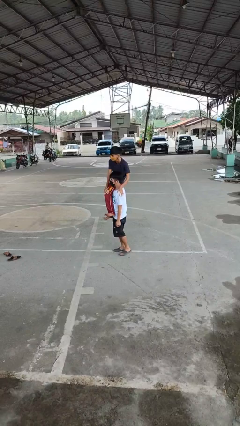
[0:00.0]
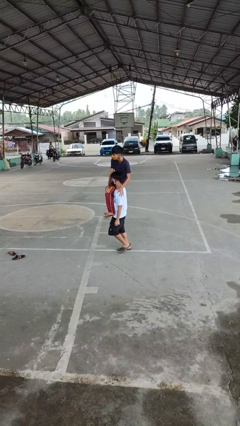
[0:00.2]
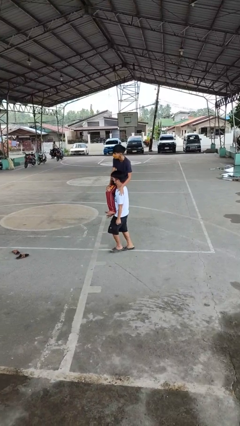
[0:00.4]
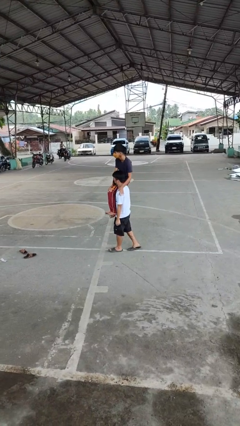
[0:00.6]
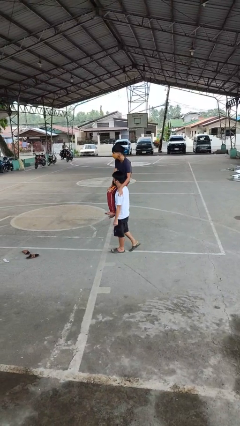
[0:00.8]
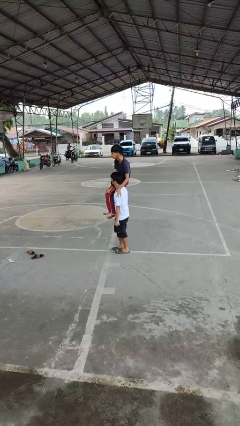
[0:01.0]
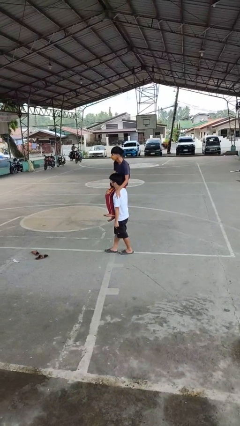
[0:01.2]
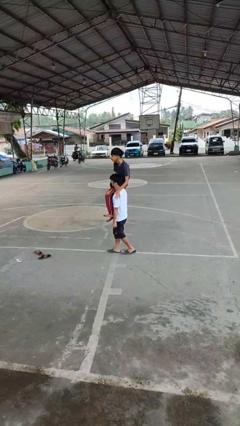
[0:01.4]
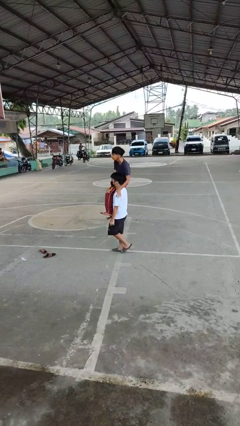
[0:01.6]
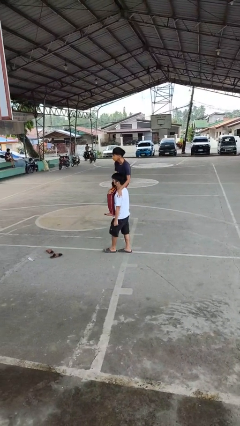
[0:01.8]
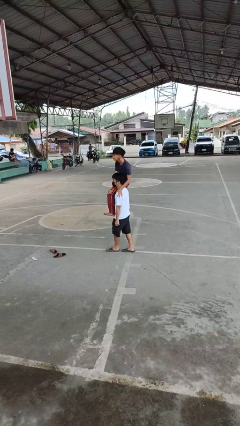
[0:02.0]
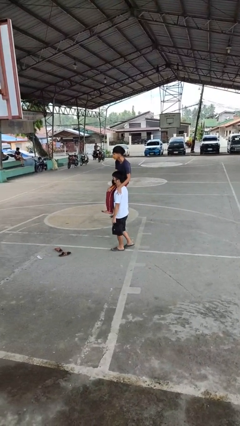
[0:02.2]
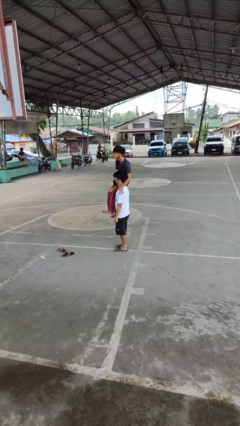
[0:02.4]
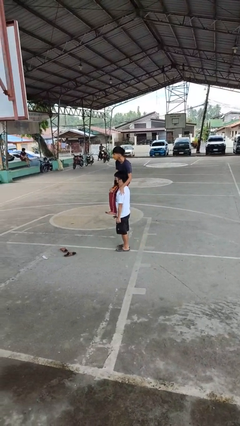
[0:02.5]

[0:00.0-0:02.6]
person carries person on shoulders

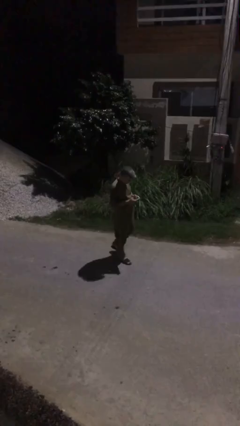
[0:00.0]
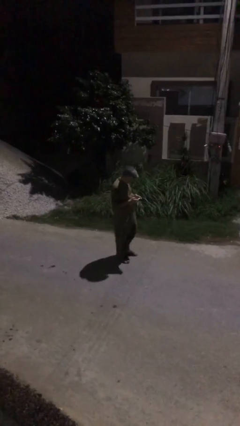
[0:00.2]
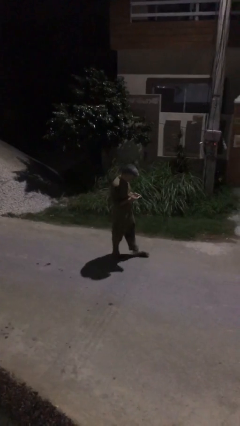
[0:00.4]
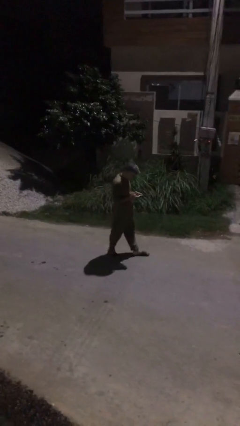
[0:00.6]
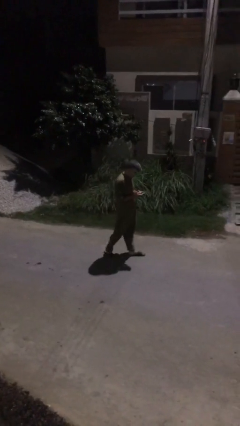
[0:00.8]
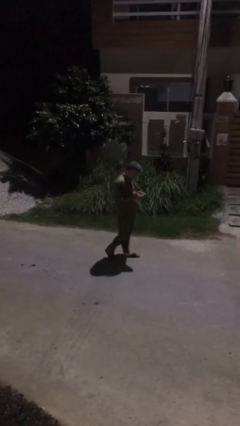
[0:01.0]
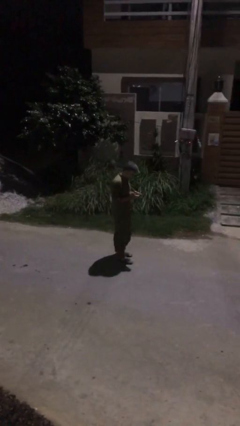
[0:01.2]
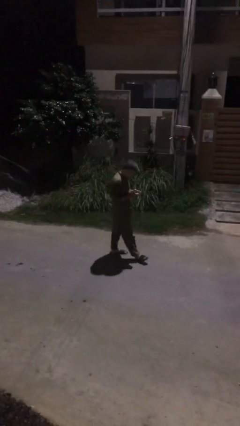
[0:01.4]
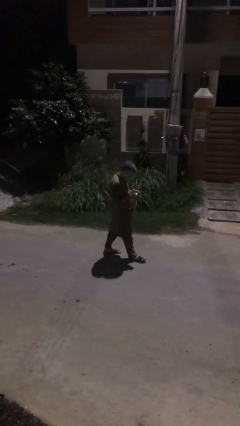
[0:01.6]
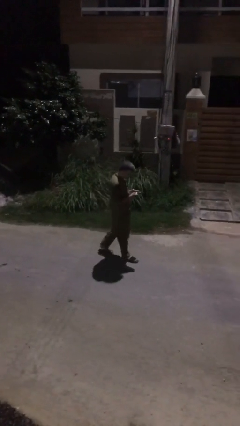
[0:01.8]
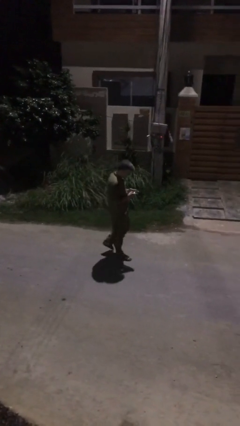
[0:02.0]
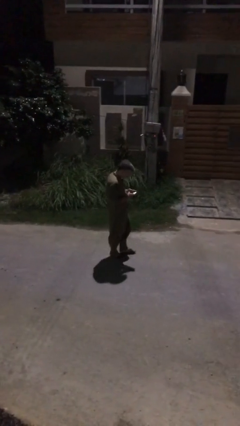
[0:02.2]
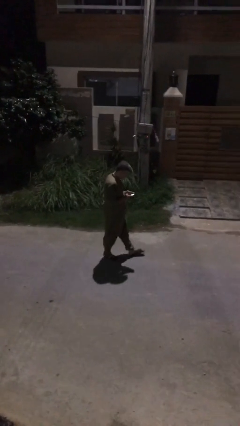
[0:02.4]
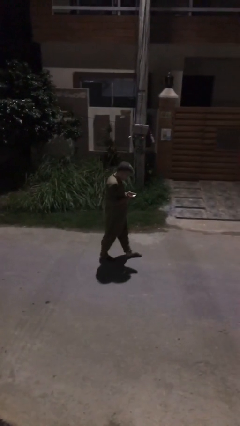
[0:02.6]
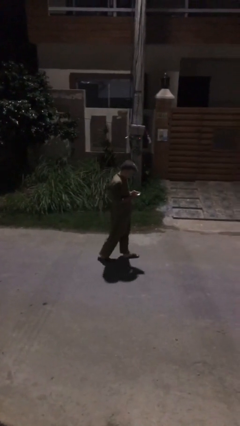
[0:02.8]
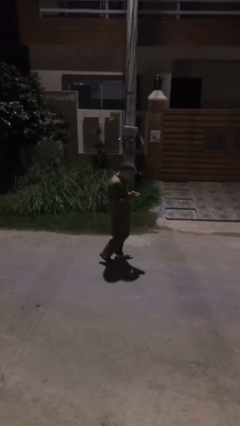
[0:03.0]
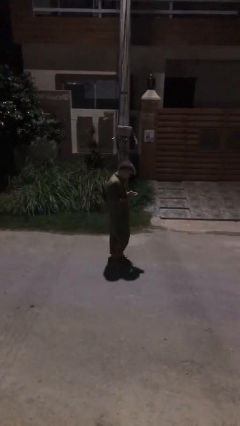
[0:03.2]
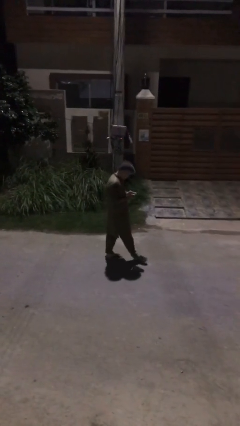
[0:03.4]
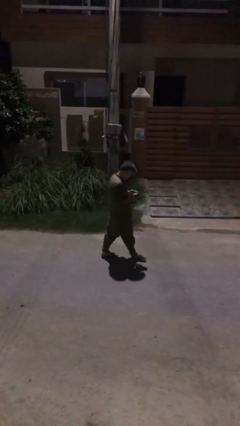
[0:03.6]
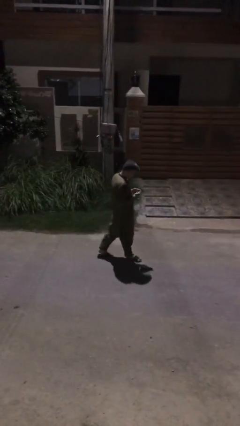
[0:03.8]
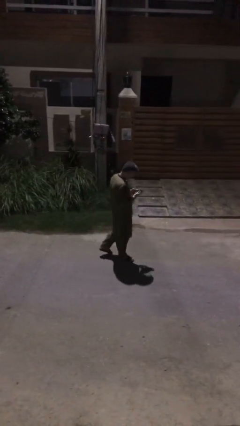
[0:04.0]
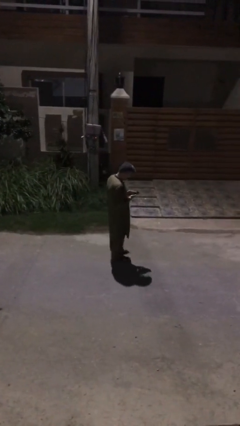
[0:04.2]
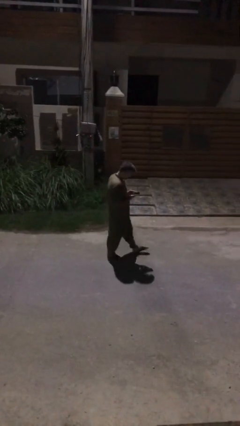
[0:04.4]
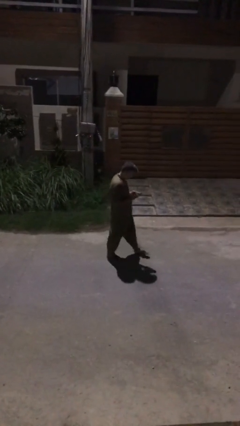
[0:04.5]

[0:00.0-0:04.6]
person texts on phone

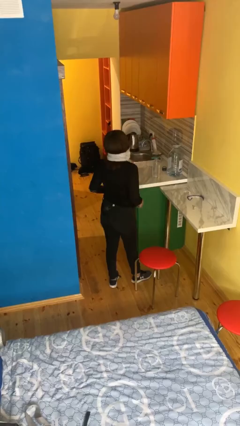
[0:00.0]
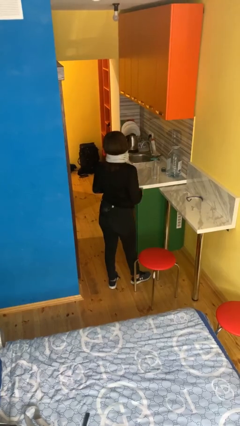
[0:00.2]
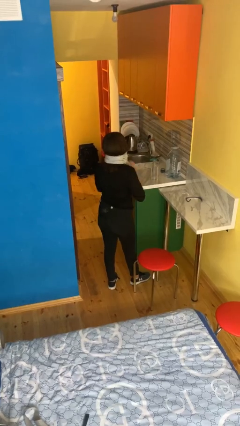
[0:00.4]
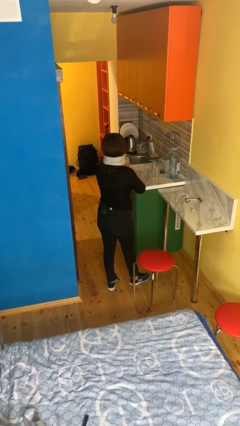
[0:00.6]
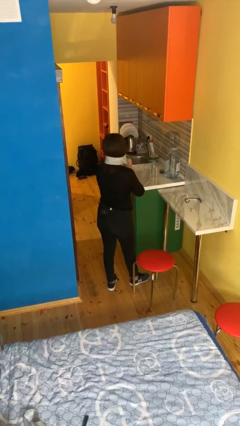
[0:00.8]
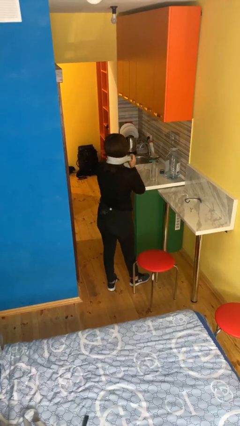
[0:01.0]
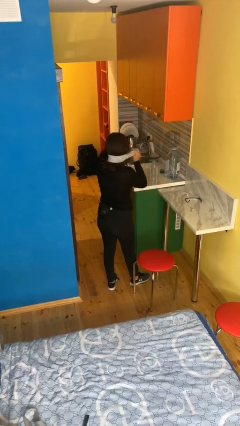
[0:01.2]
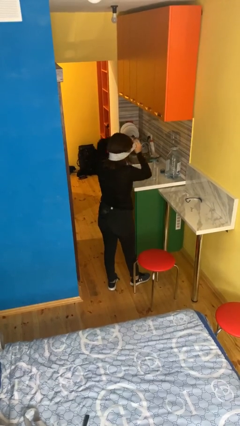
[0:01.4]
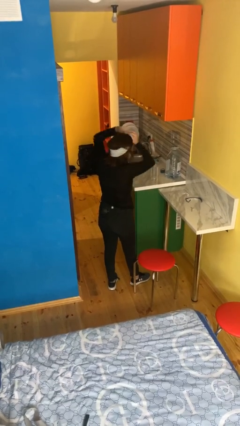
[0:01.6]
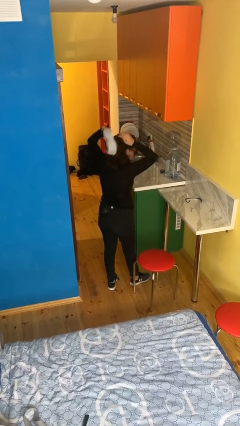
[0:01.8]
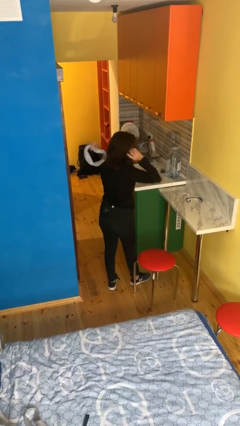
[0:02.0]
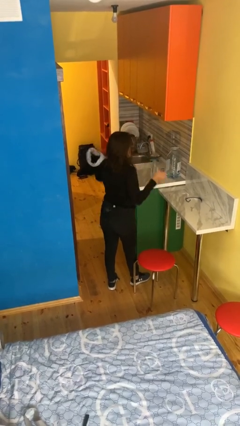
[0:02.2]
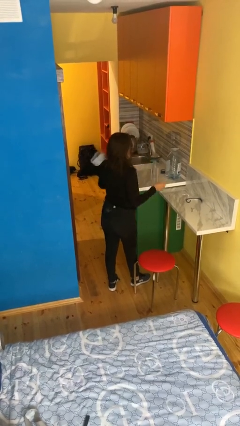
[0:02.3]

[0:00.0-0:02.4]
person takes off scarf

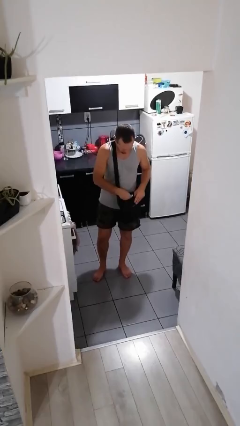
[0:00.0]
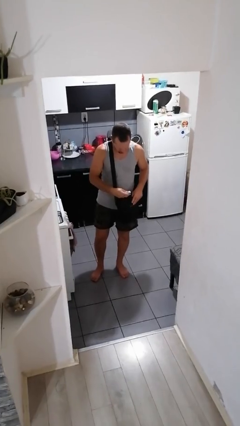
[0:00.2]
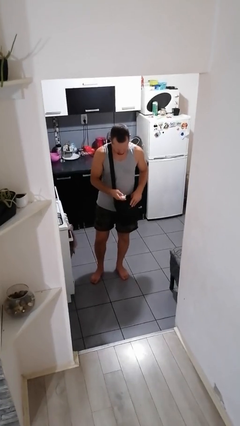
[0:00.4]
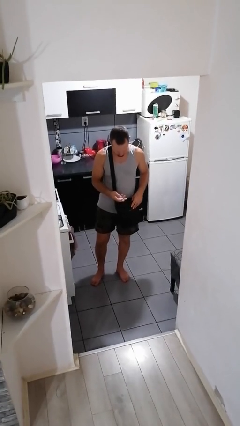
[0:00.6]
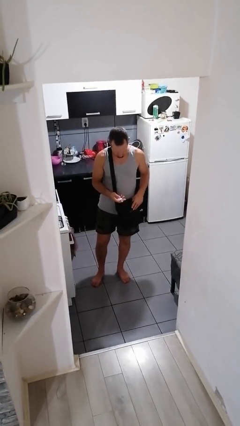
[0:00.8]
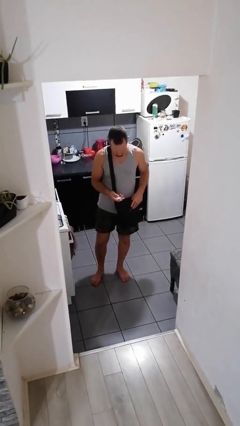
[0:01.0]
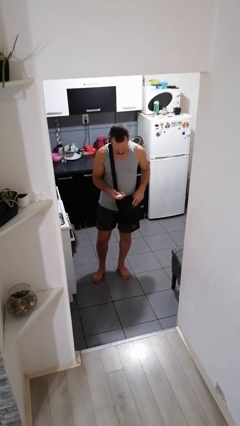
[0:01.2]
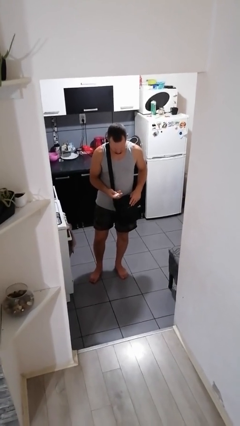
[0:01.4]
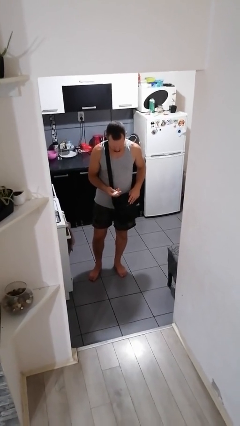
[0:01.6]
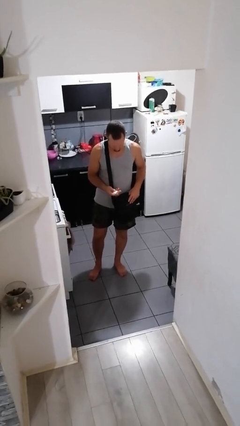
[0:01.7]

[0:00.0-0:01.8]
person takes object from purse

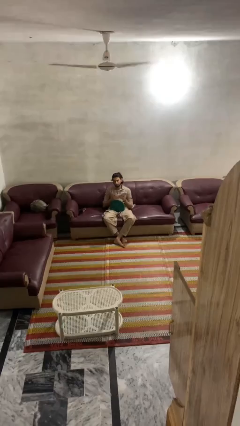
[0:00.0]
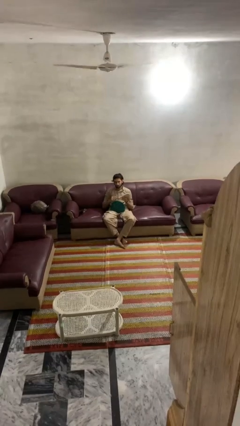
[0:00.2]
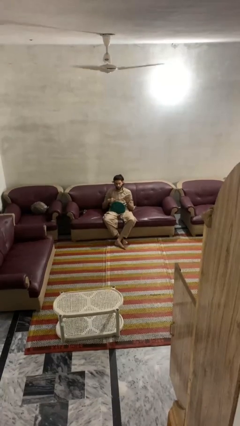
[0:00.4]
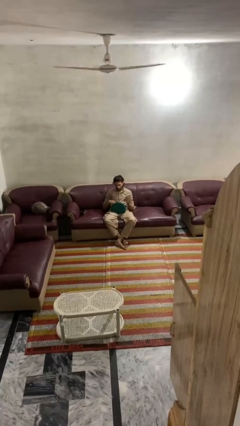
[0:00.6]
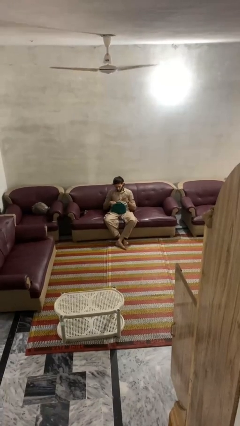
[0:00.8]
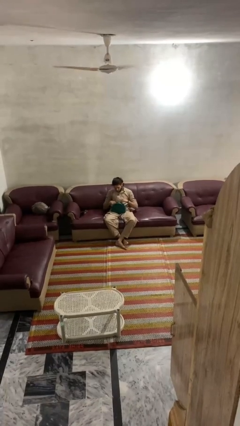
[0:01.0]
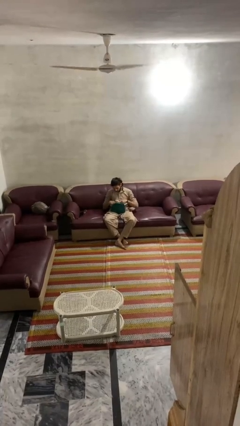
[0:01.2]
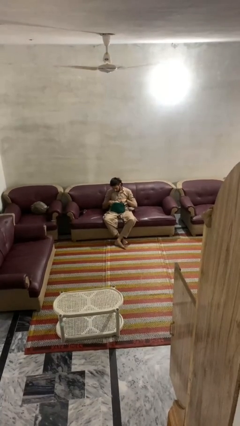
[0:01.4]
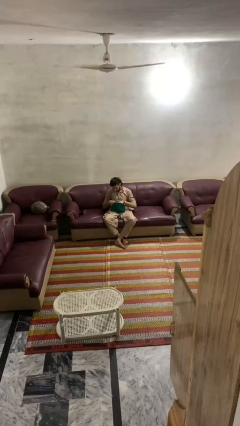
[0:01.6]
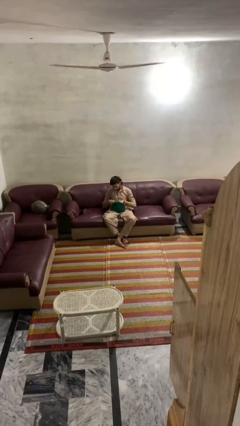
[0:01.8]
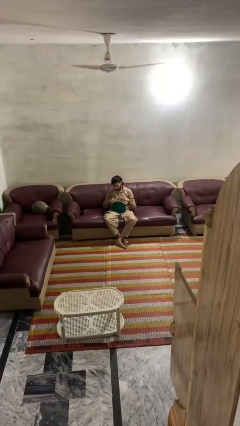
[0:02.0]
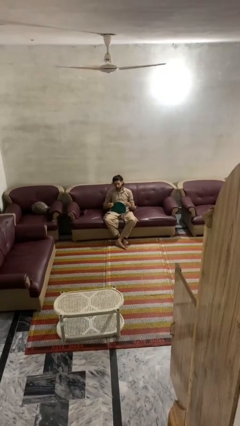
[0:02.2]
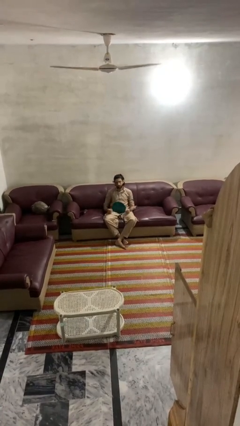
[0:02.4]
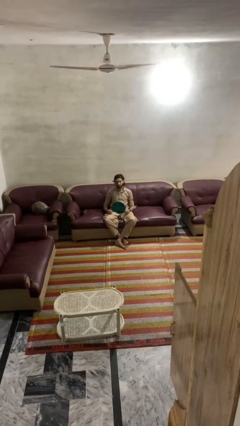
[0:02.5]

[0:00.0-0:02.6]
person puts object into purse

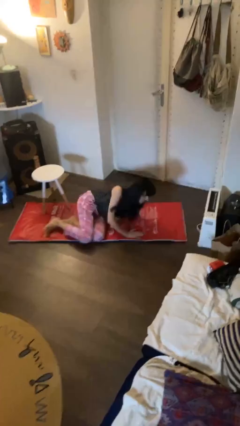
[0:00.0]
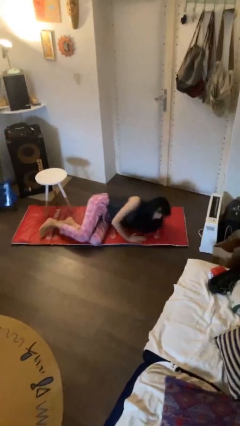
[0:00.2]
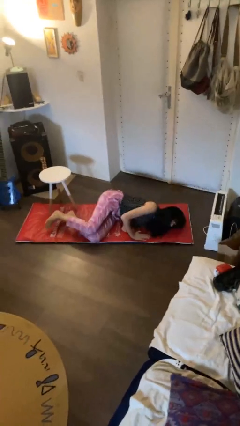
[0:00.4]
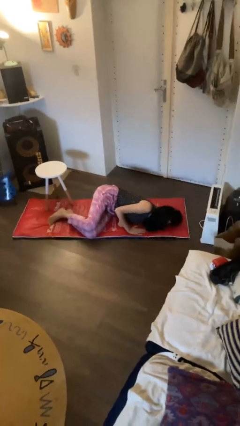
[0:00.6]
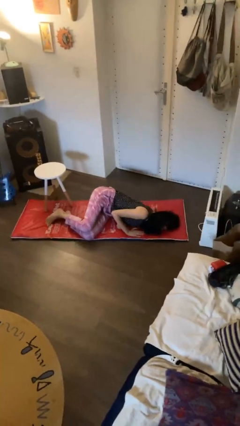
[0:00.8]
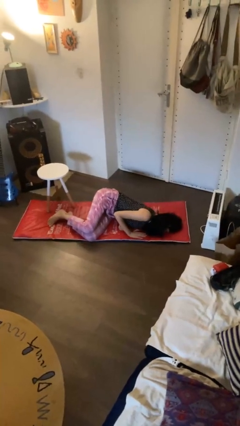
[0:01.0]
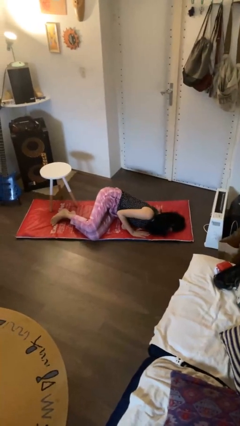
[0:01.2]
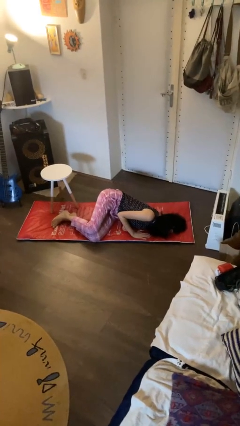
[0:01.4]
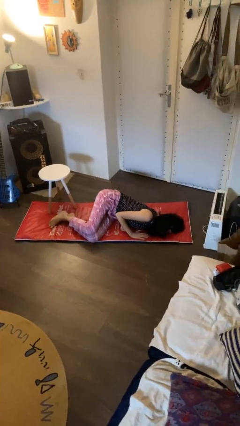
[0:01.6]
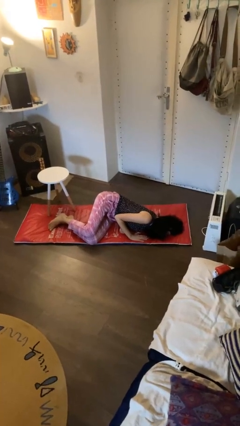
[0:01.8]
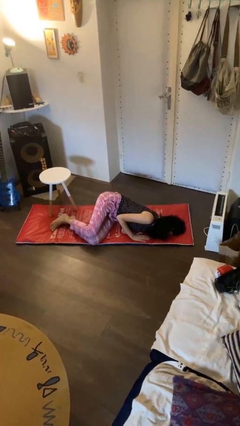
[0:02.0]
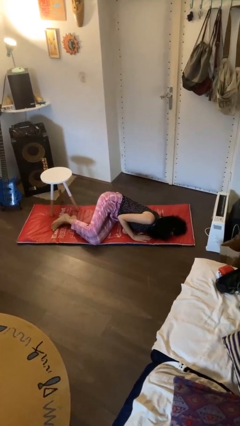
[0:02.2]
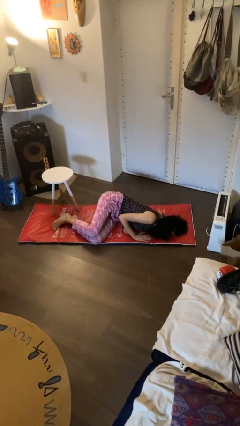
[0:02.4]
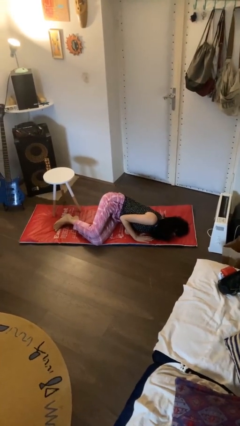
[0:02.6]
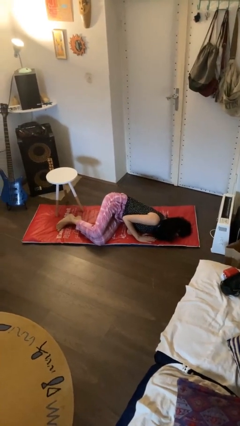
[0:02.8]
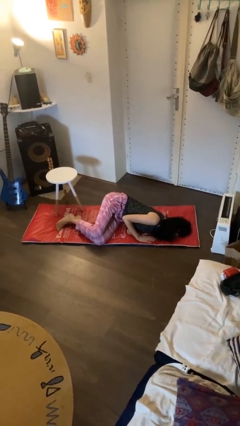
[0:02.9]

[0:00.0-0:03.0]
person lies down on floor
